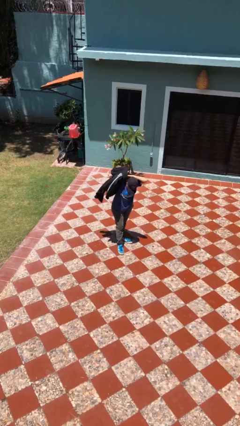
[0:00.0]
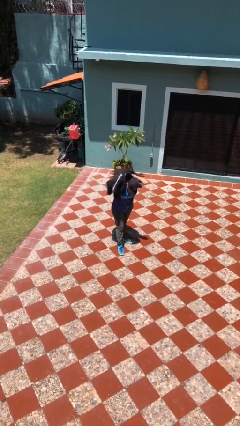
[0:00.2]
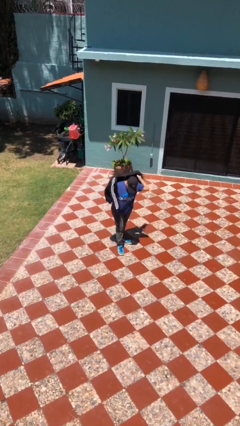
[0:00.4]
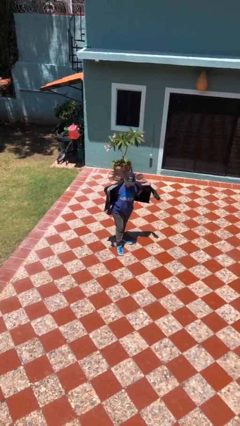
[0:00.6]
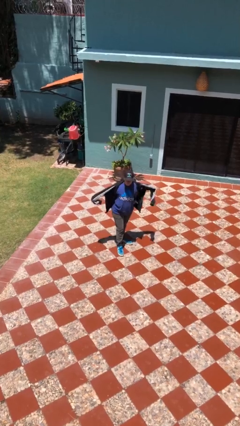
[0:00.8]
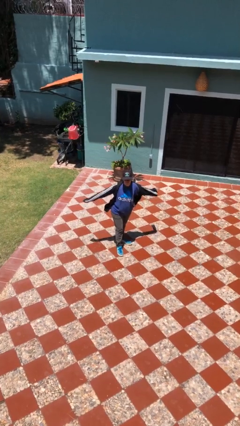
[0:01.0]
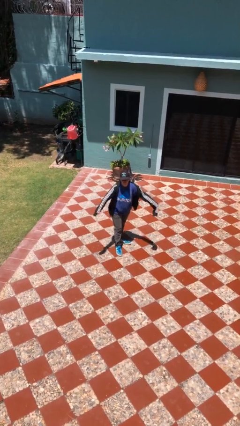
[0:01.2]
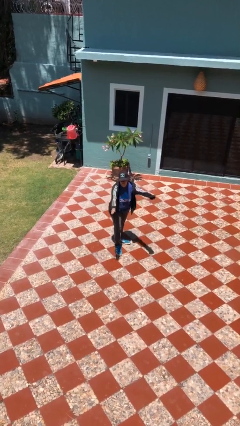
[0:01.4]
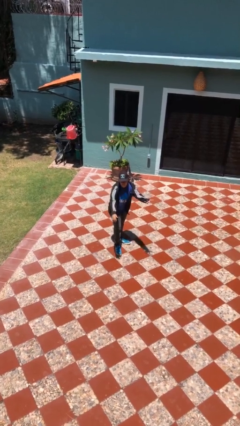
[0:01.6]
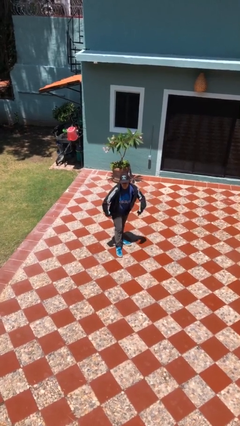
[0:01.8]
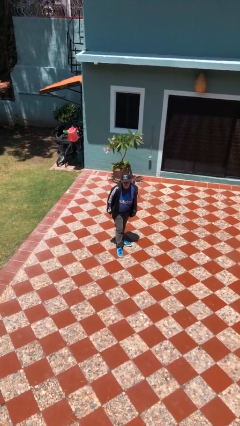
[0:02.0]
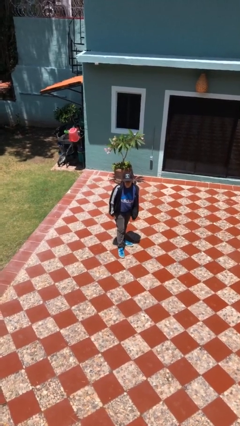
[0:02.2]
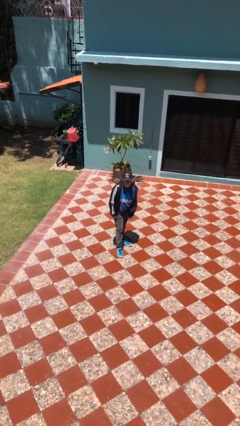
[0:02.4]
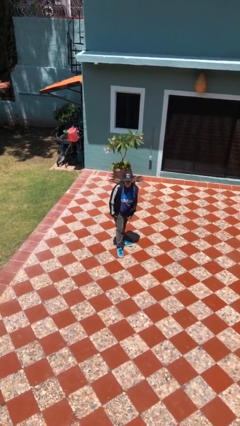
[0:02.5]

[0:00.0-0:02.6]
person puts on jacket

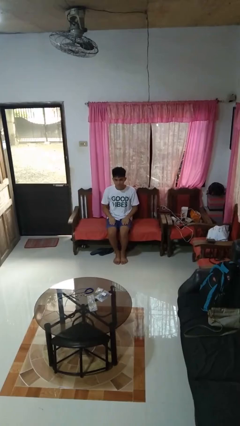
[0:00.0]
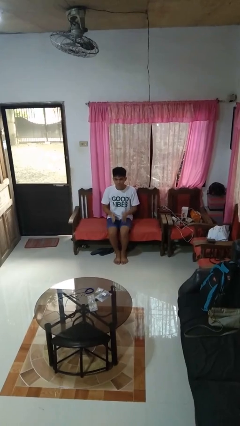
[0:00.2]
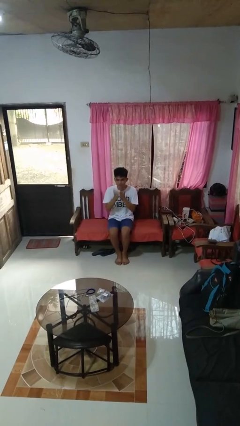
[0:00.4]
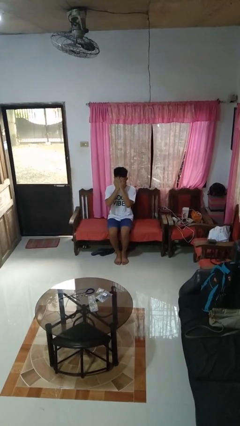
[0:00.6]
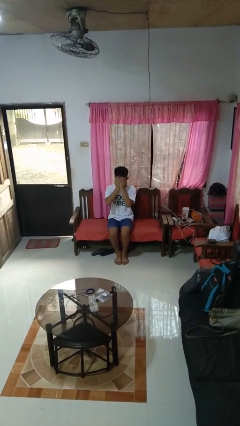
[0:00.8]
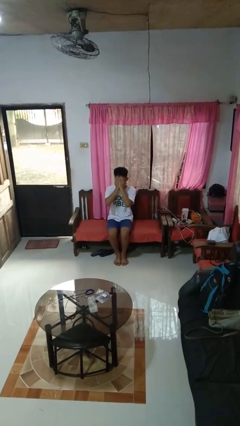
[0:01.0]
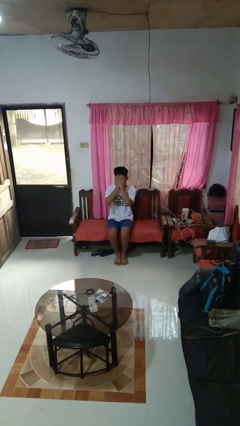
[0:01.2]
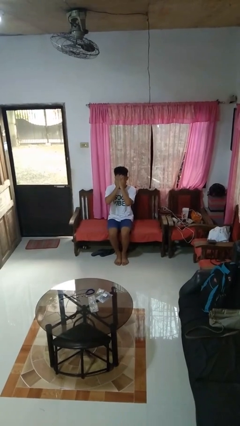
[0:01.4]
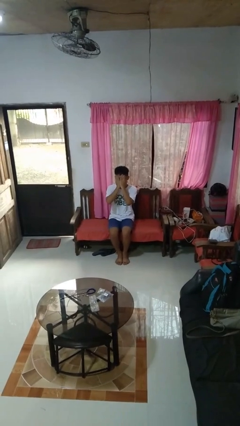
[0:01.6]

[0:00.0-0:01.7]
person covers face with hands

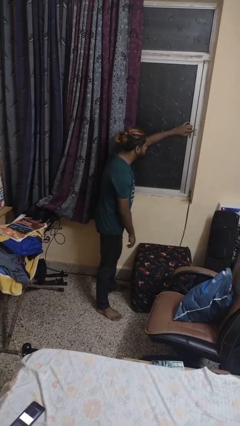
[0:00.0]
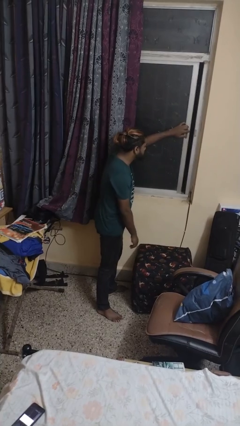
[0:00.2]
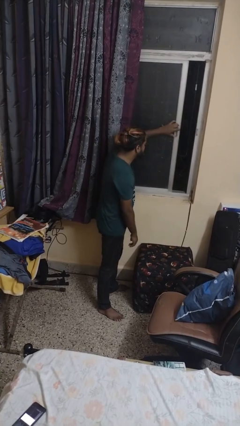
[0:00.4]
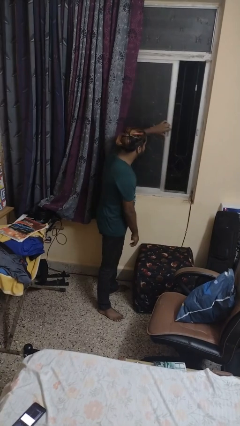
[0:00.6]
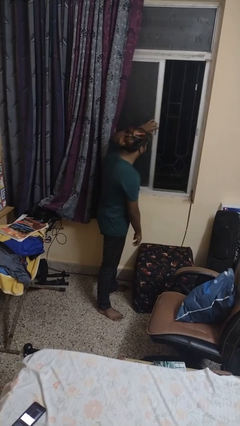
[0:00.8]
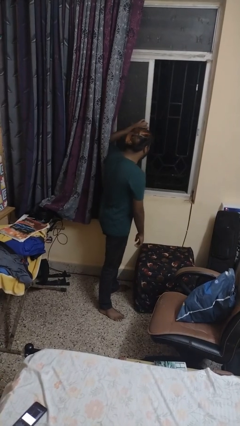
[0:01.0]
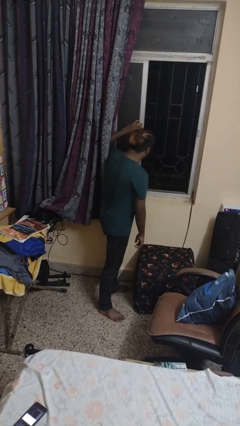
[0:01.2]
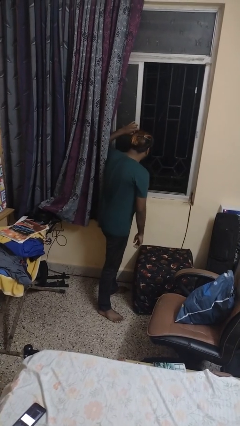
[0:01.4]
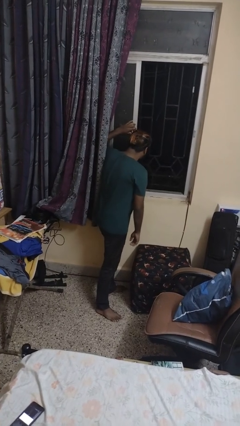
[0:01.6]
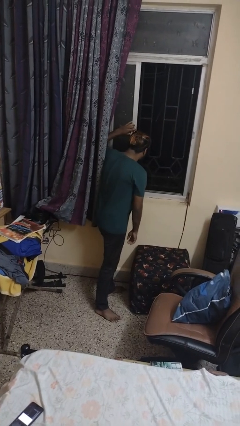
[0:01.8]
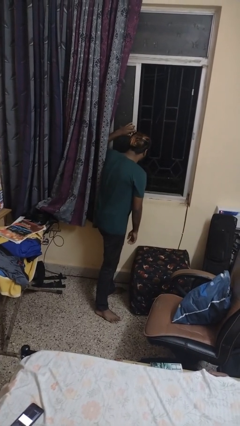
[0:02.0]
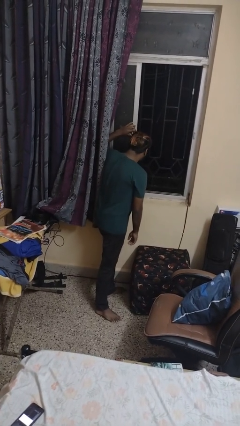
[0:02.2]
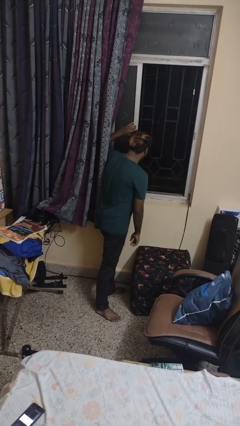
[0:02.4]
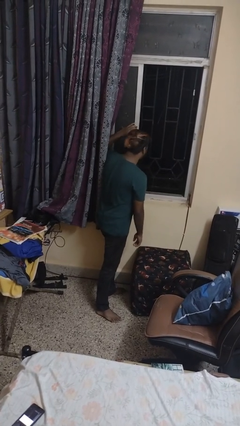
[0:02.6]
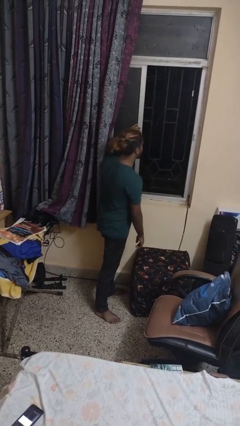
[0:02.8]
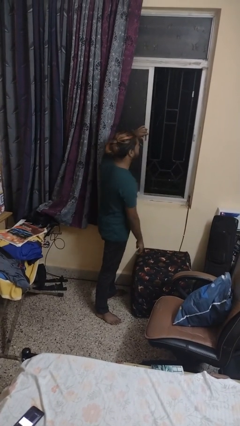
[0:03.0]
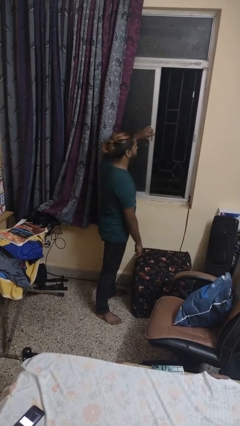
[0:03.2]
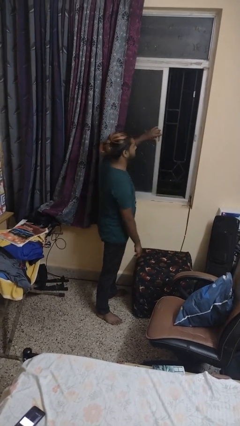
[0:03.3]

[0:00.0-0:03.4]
person opens sliding door

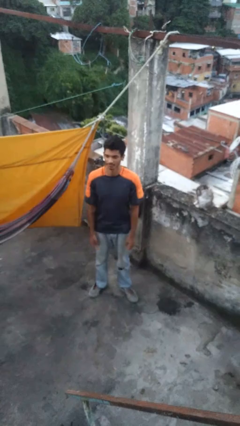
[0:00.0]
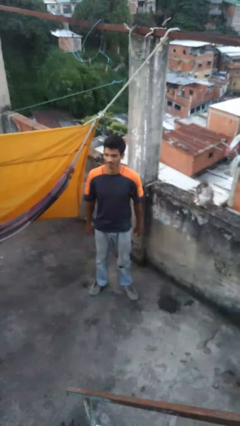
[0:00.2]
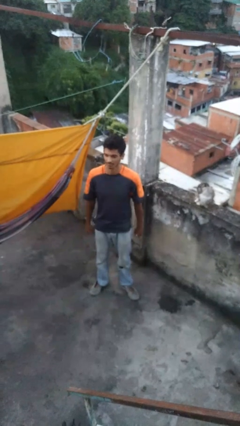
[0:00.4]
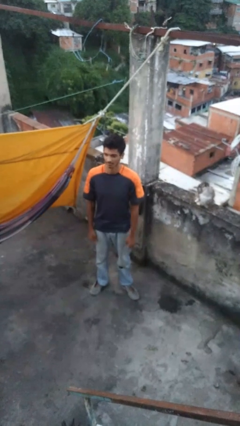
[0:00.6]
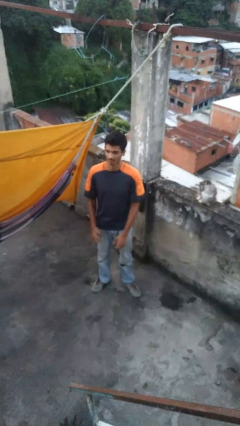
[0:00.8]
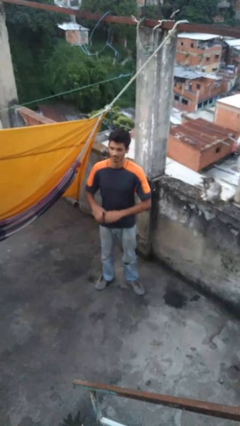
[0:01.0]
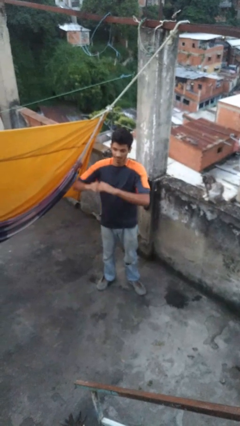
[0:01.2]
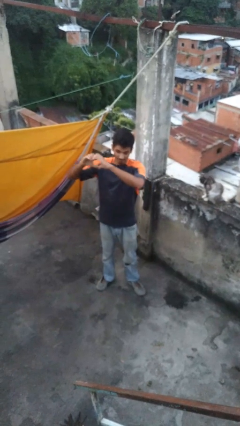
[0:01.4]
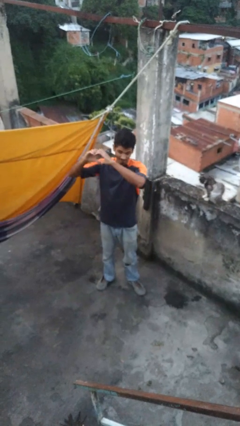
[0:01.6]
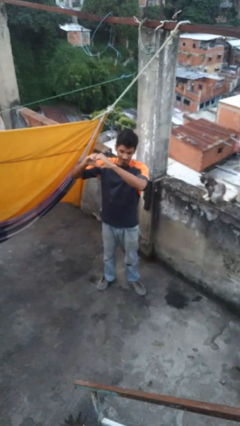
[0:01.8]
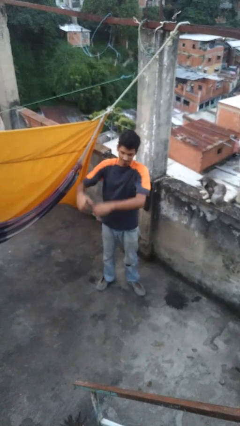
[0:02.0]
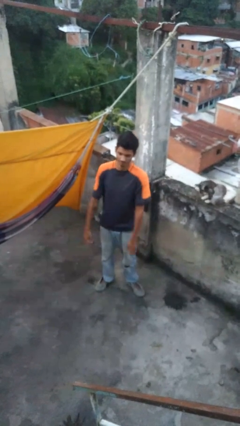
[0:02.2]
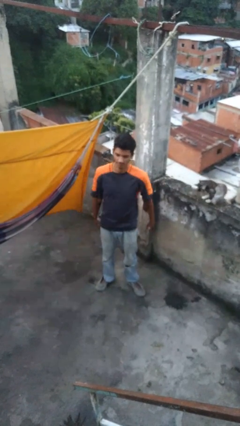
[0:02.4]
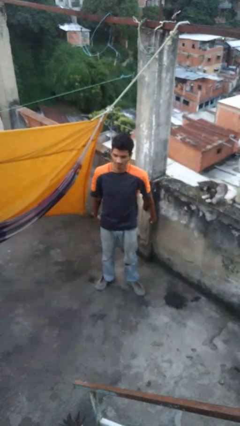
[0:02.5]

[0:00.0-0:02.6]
person gestures heart

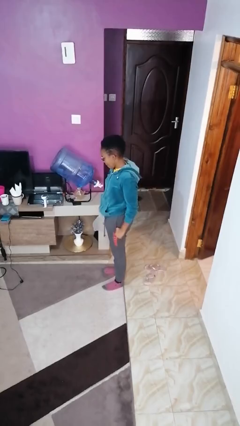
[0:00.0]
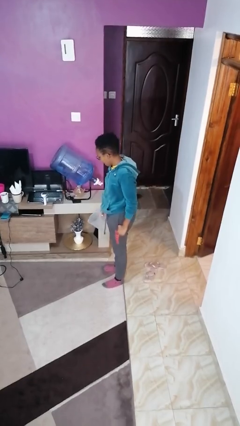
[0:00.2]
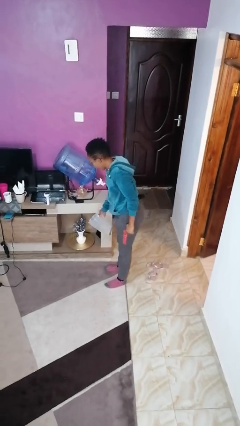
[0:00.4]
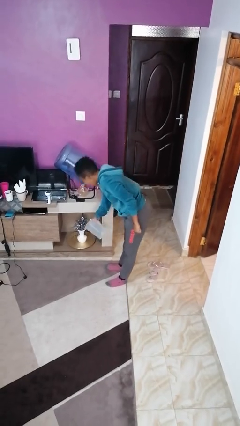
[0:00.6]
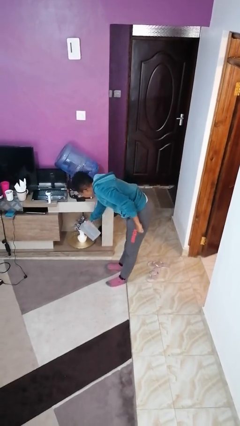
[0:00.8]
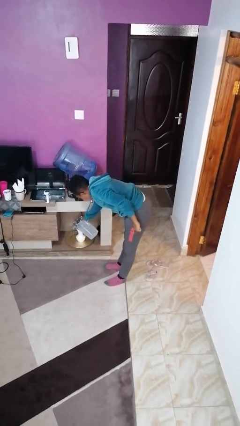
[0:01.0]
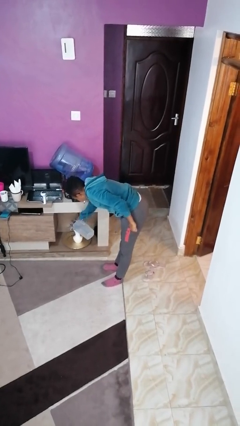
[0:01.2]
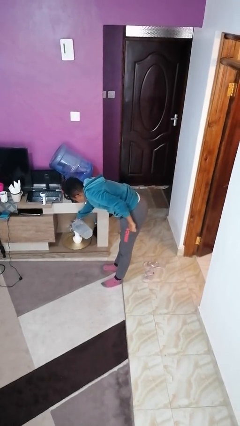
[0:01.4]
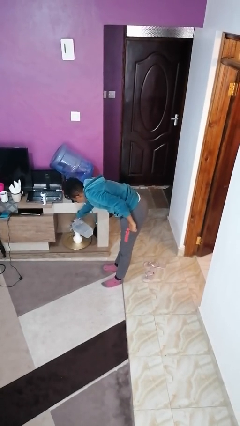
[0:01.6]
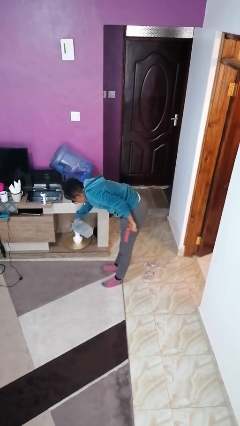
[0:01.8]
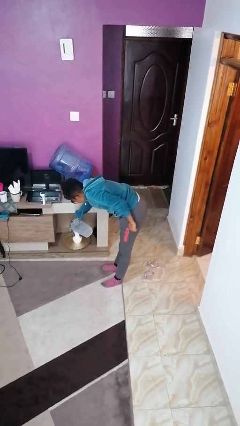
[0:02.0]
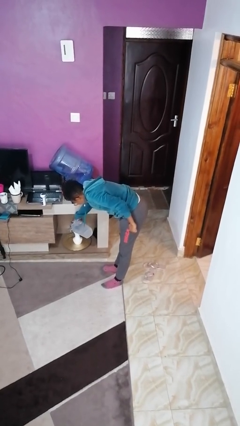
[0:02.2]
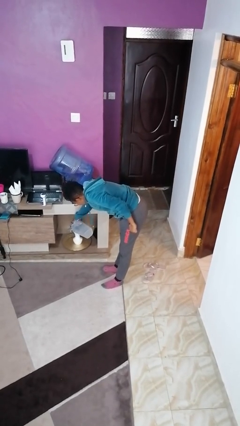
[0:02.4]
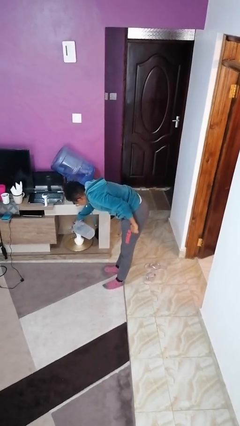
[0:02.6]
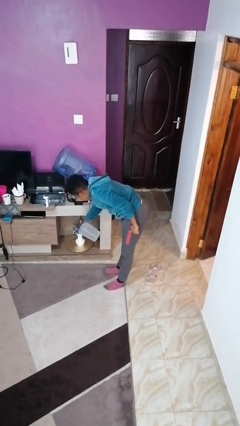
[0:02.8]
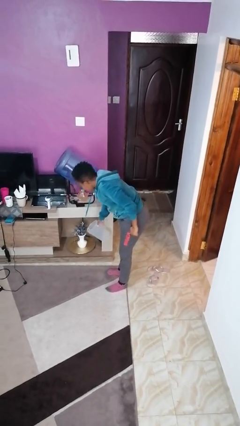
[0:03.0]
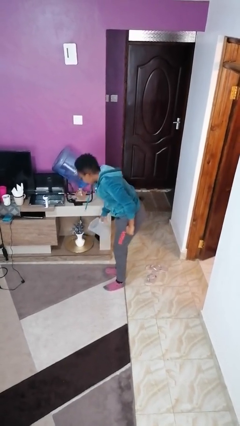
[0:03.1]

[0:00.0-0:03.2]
person waters houseplant

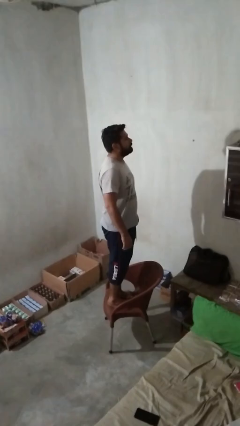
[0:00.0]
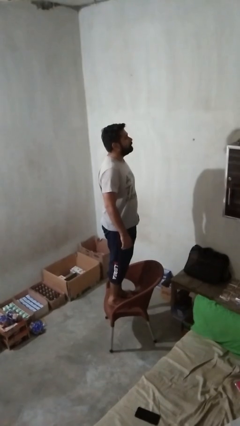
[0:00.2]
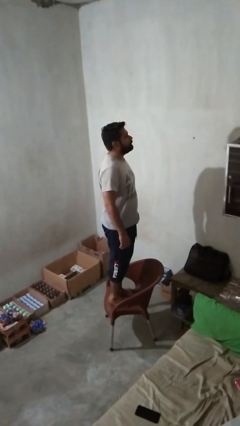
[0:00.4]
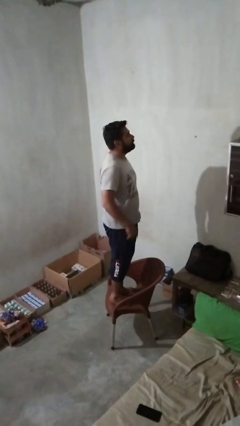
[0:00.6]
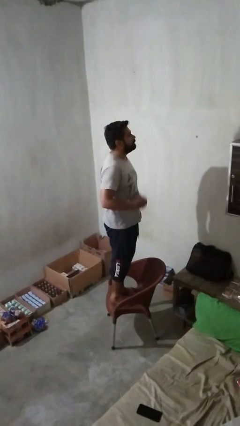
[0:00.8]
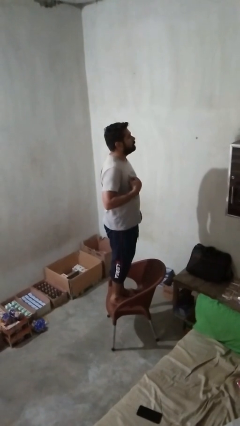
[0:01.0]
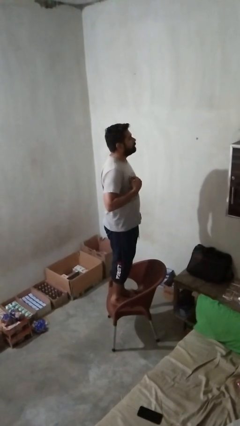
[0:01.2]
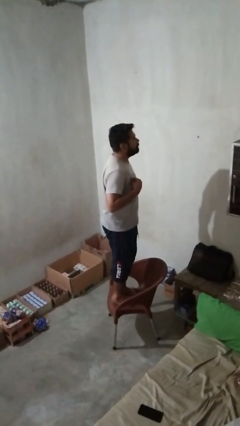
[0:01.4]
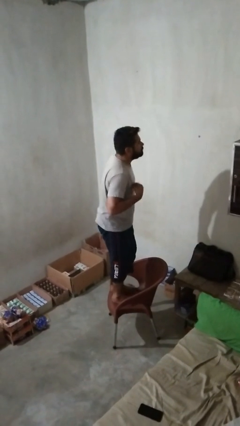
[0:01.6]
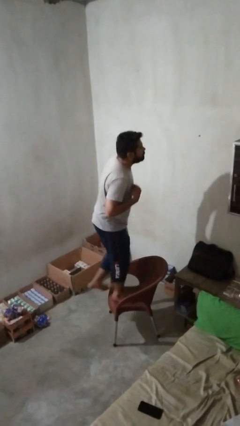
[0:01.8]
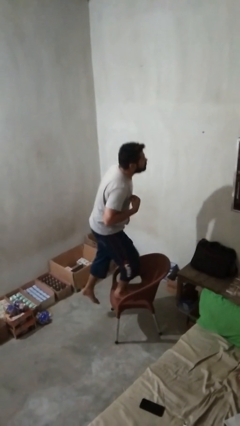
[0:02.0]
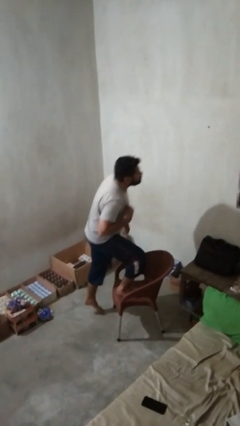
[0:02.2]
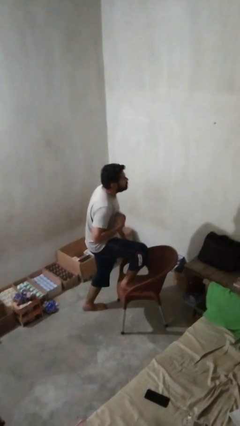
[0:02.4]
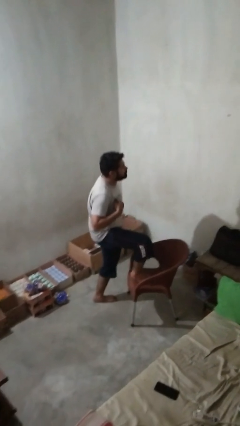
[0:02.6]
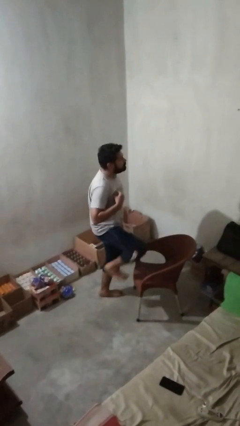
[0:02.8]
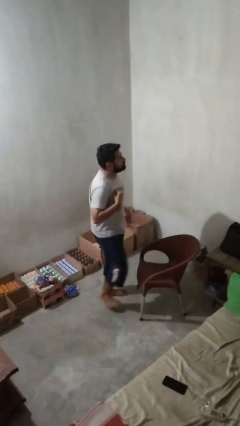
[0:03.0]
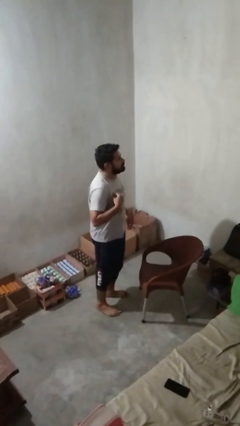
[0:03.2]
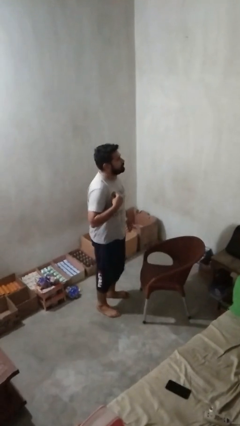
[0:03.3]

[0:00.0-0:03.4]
person climbs off chair

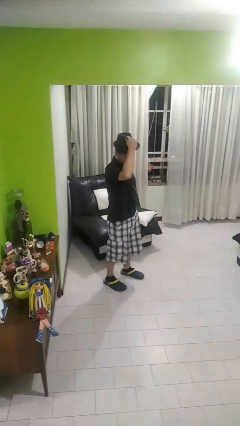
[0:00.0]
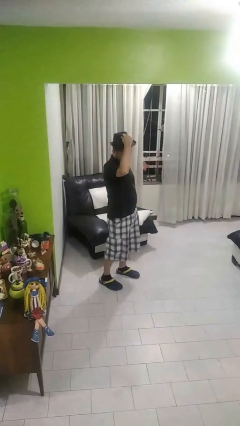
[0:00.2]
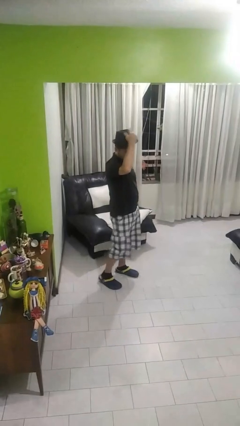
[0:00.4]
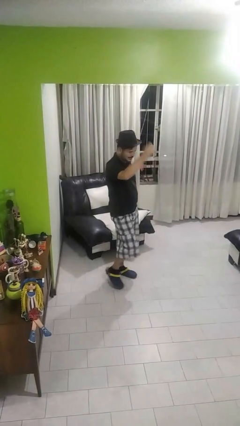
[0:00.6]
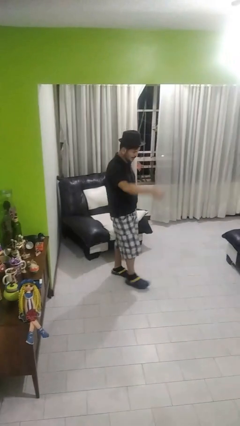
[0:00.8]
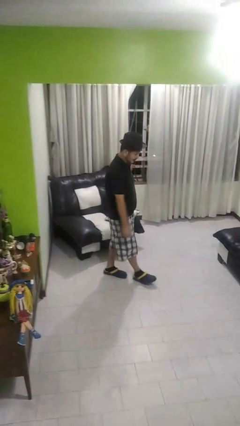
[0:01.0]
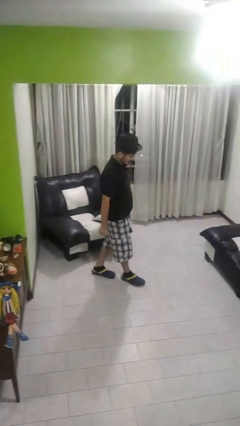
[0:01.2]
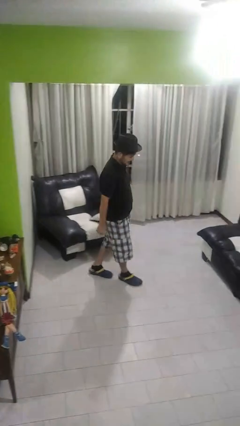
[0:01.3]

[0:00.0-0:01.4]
person puts on hat
